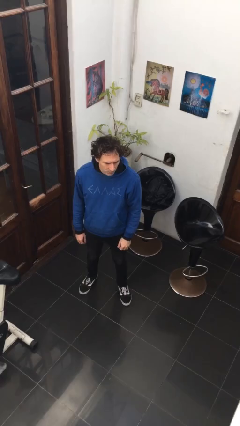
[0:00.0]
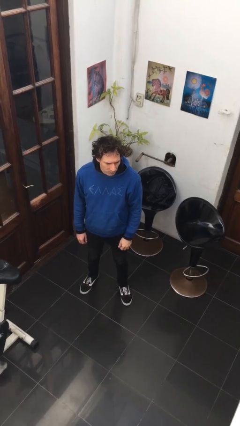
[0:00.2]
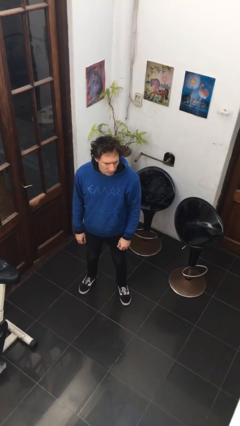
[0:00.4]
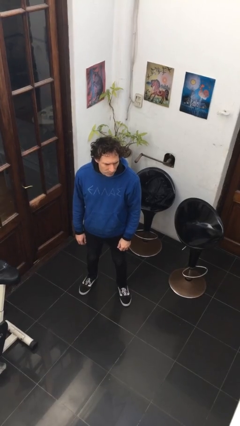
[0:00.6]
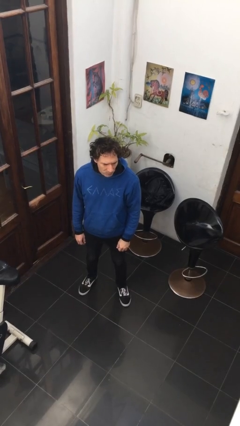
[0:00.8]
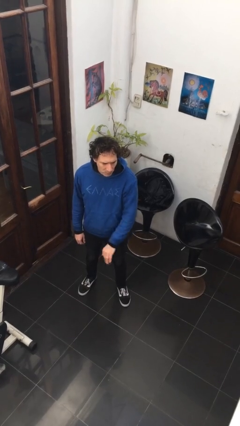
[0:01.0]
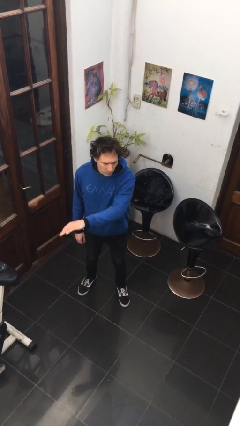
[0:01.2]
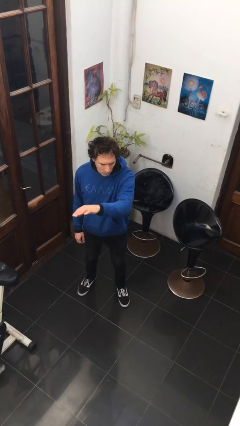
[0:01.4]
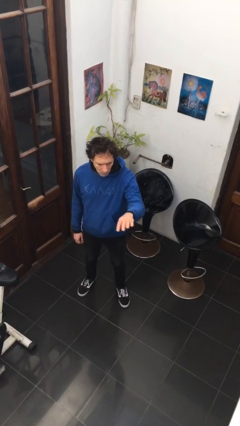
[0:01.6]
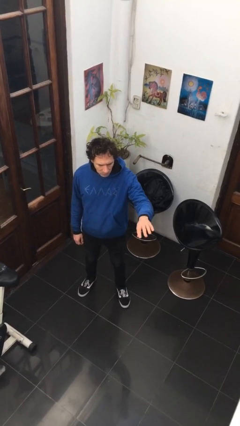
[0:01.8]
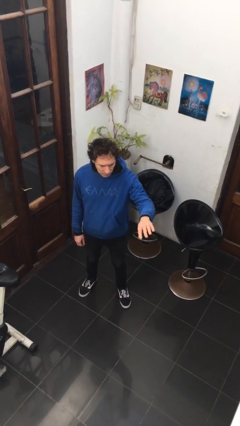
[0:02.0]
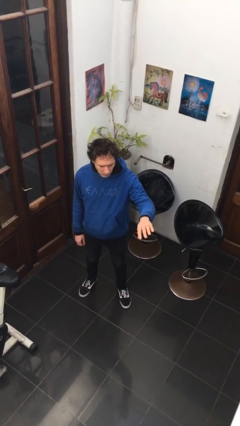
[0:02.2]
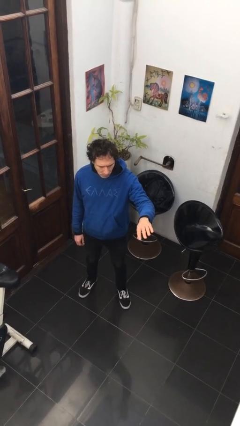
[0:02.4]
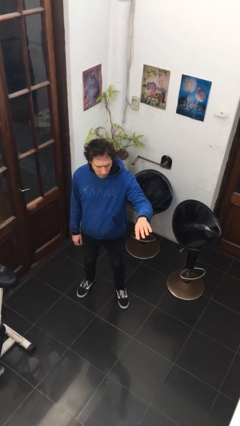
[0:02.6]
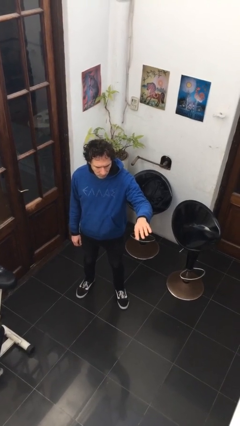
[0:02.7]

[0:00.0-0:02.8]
person gestures swipe left

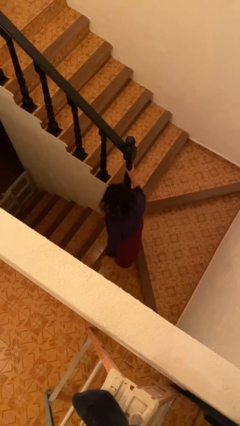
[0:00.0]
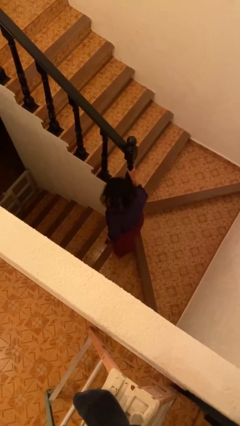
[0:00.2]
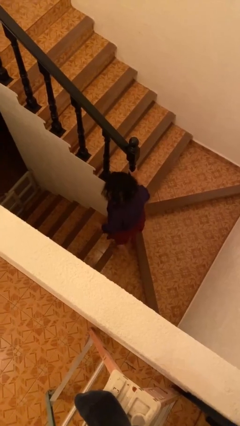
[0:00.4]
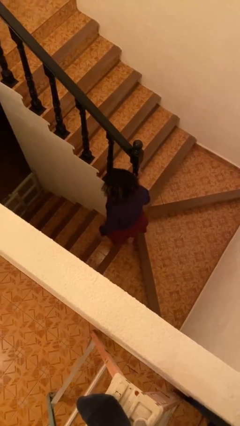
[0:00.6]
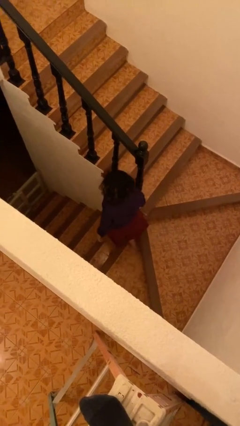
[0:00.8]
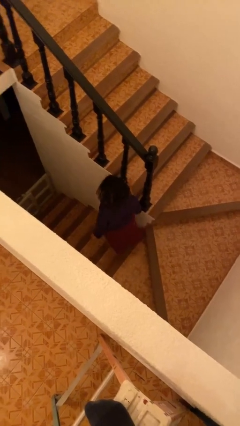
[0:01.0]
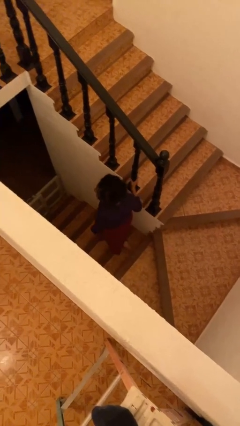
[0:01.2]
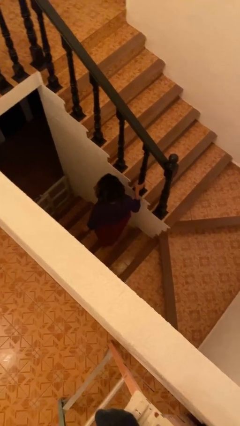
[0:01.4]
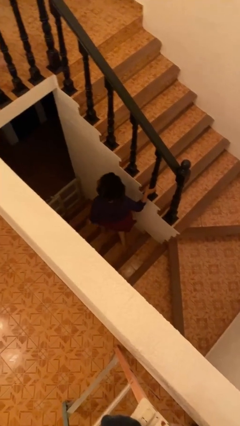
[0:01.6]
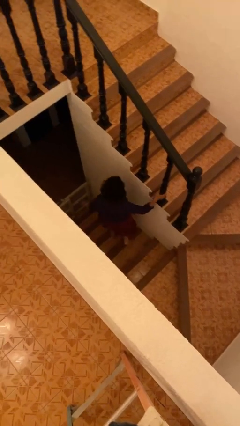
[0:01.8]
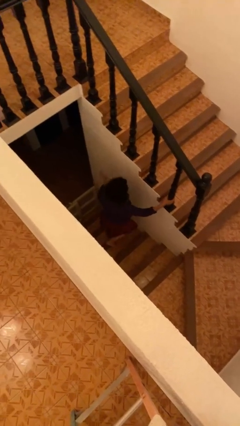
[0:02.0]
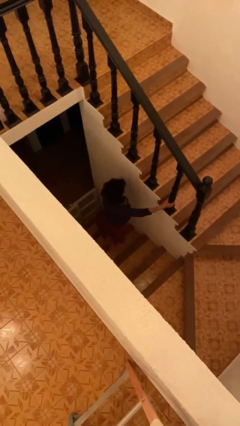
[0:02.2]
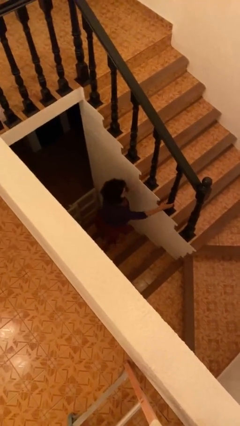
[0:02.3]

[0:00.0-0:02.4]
person climbs down stairs

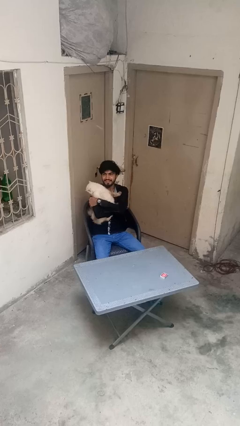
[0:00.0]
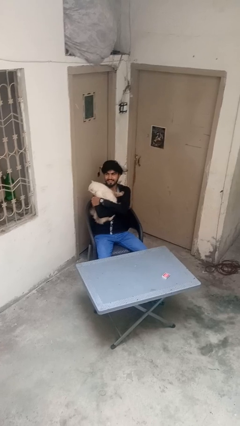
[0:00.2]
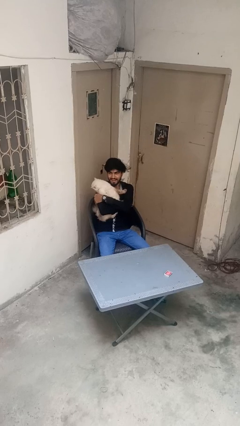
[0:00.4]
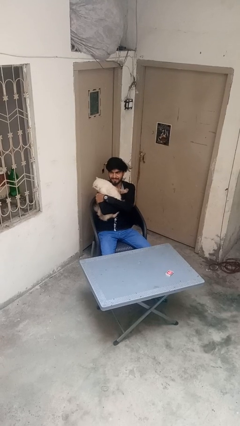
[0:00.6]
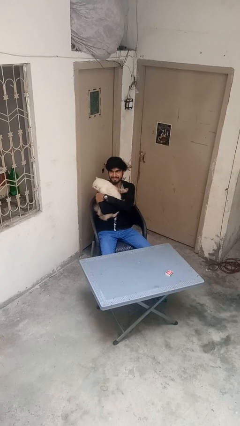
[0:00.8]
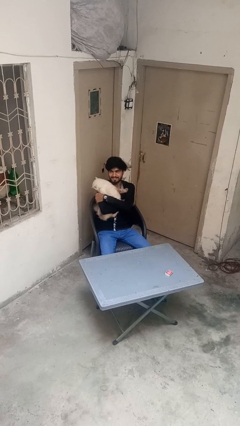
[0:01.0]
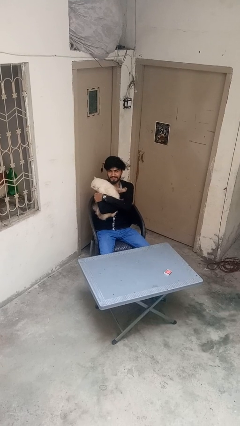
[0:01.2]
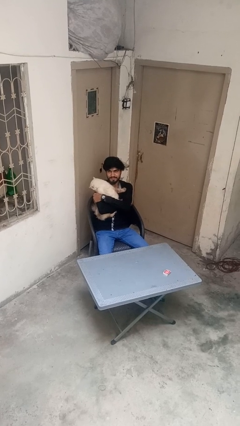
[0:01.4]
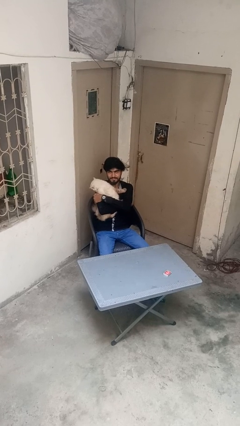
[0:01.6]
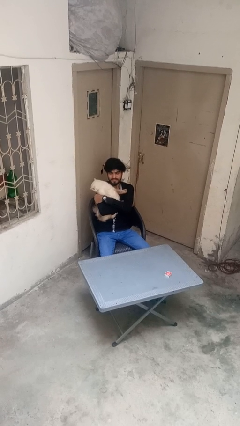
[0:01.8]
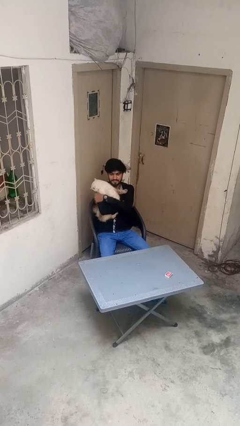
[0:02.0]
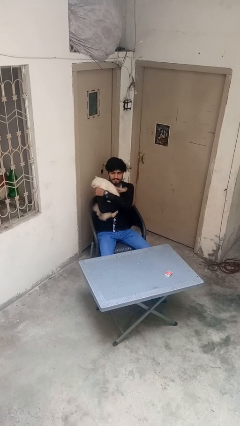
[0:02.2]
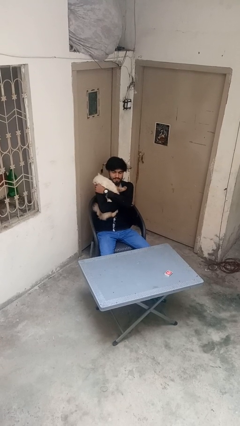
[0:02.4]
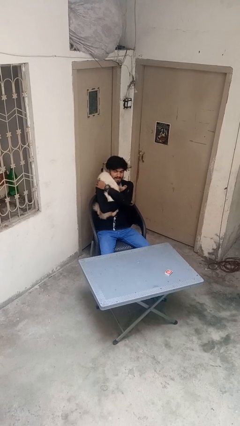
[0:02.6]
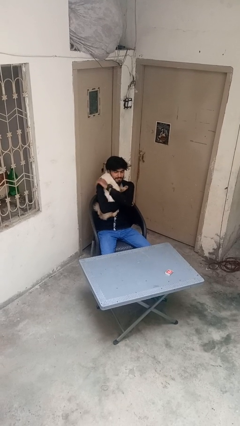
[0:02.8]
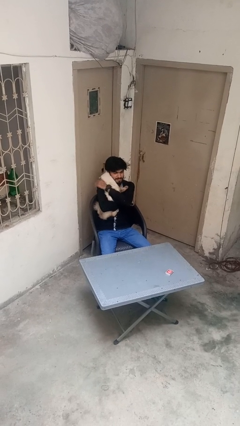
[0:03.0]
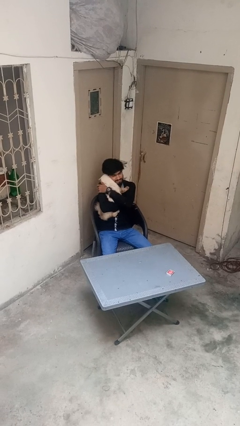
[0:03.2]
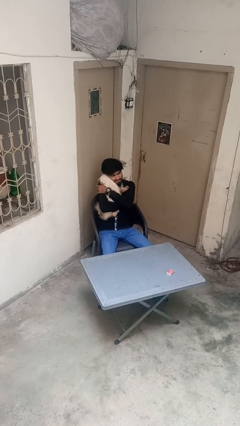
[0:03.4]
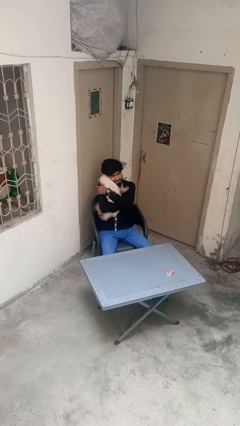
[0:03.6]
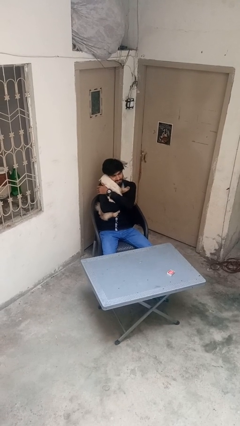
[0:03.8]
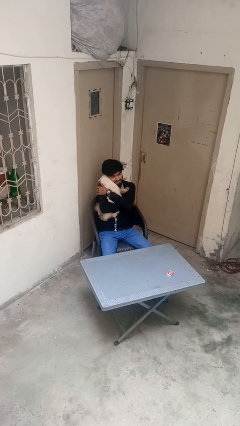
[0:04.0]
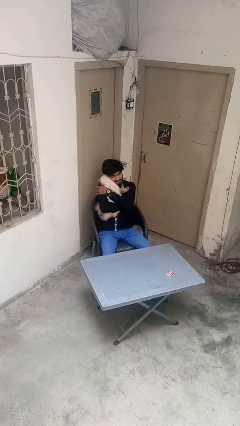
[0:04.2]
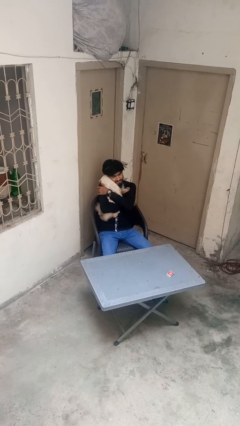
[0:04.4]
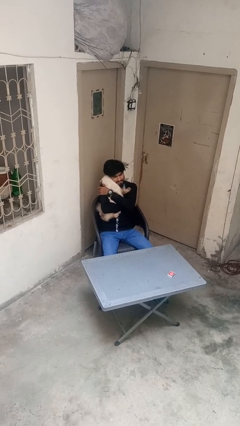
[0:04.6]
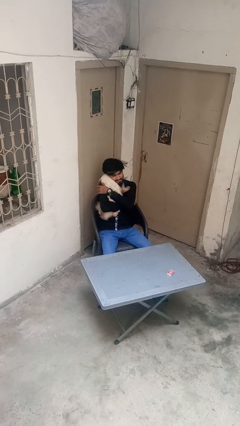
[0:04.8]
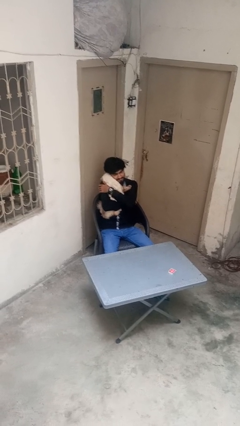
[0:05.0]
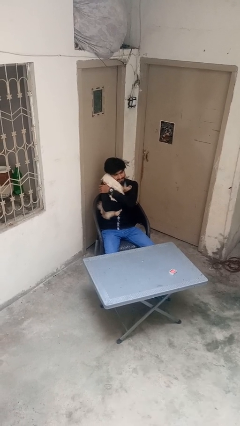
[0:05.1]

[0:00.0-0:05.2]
person hugs cat

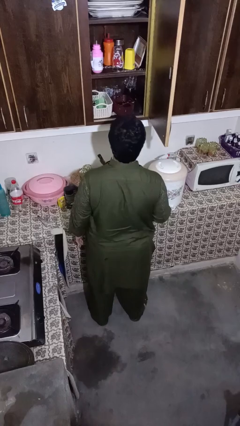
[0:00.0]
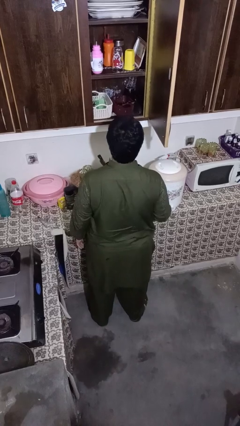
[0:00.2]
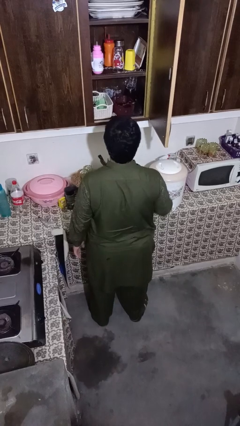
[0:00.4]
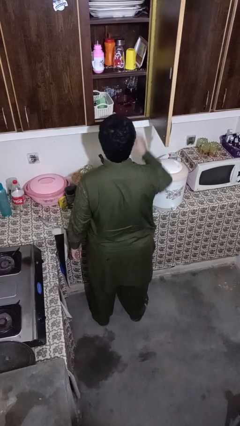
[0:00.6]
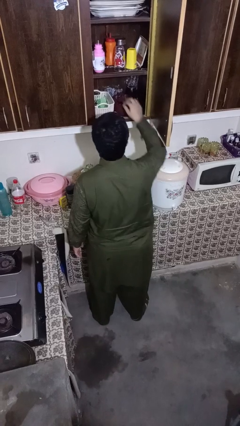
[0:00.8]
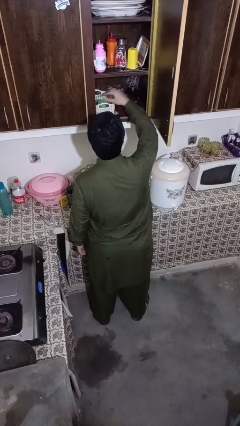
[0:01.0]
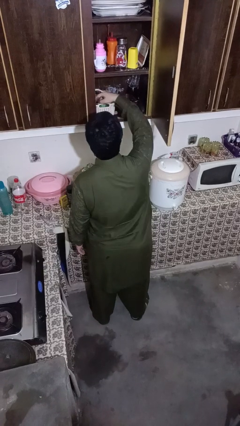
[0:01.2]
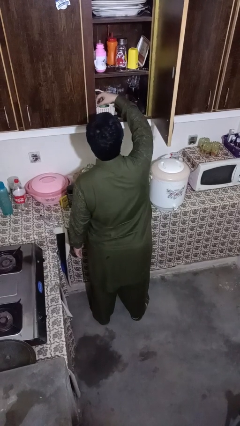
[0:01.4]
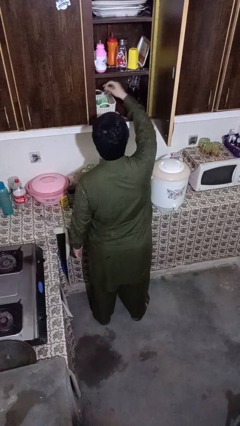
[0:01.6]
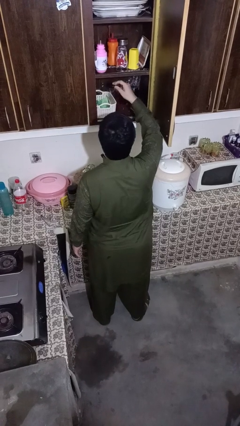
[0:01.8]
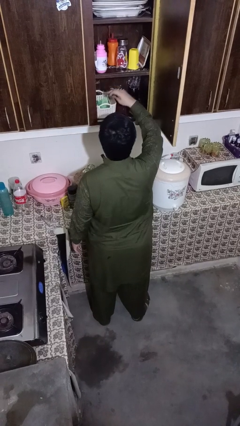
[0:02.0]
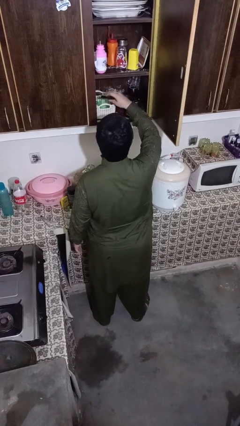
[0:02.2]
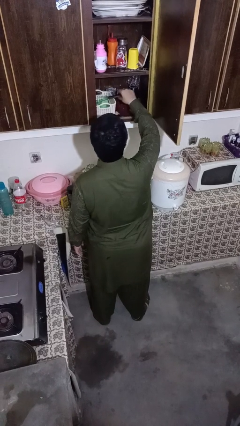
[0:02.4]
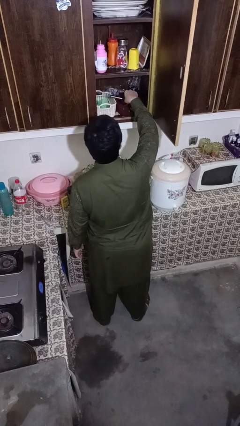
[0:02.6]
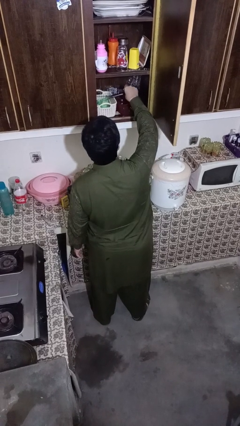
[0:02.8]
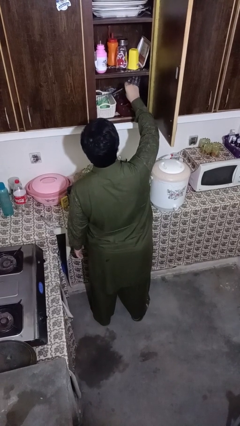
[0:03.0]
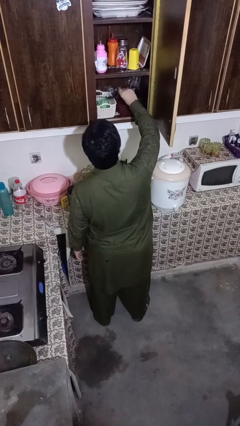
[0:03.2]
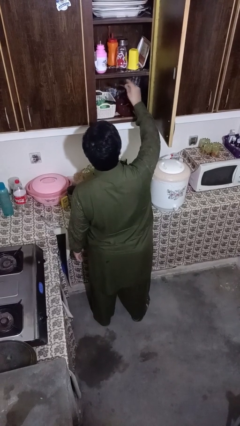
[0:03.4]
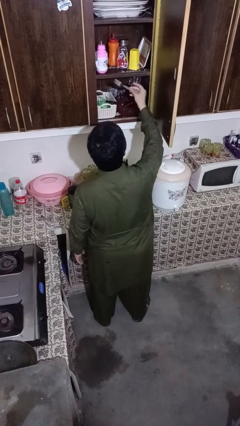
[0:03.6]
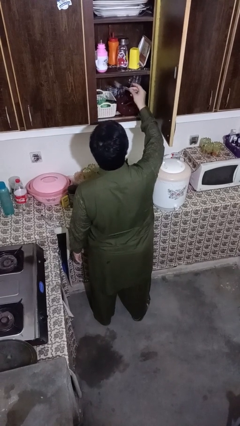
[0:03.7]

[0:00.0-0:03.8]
person searches in kitchen drawer

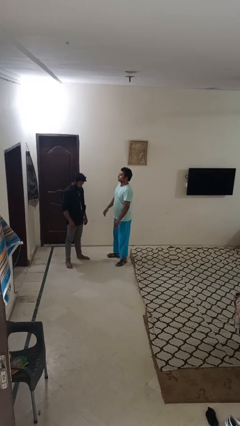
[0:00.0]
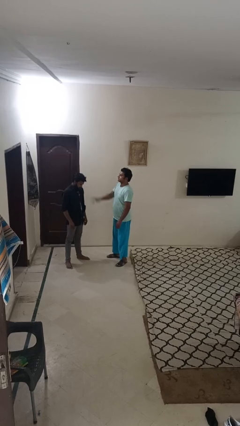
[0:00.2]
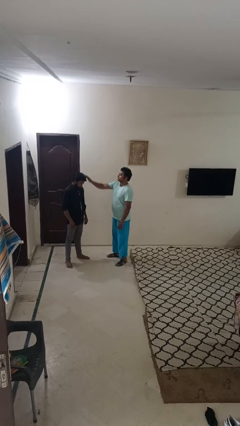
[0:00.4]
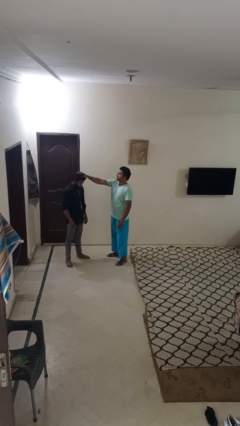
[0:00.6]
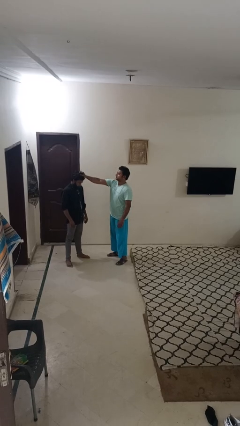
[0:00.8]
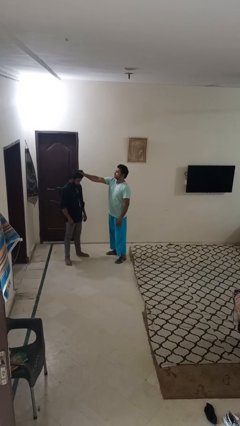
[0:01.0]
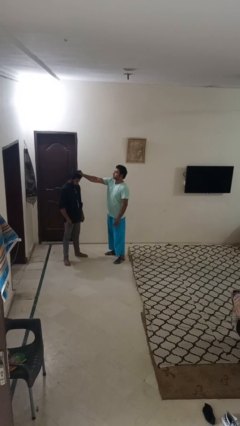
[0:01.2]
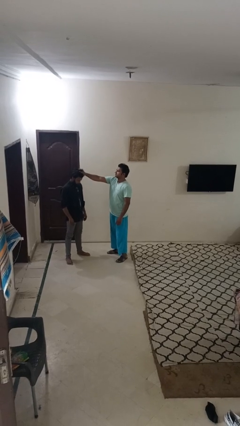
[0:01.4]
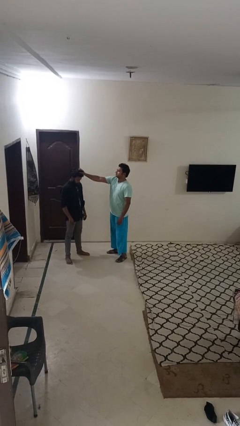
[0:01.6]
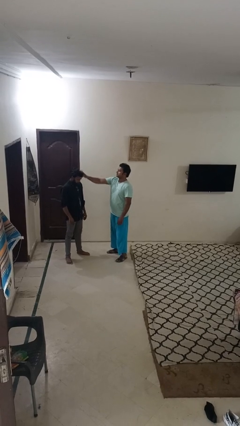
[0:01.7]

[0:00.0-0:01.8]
person grabs person by hair

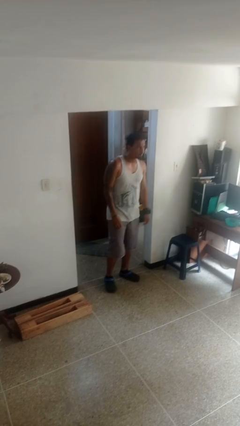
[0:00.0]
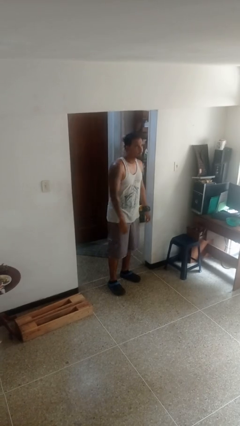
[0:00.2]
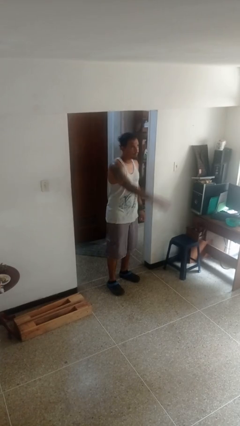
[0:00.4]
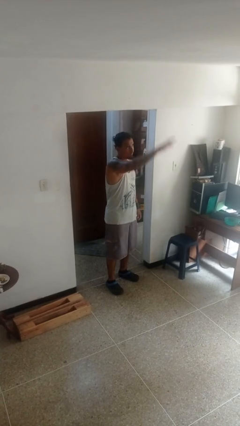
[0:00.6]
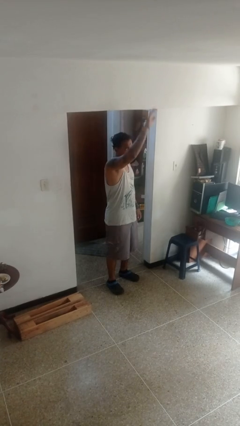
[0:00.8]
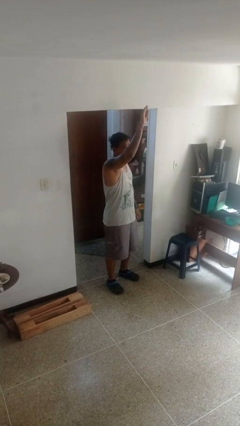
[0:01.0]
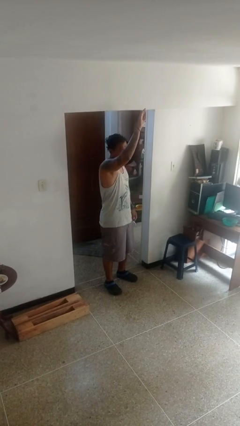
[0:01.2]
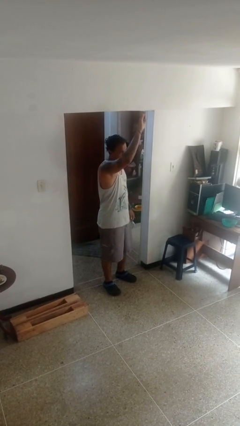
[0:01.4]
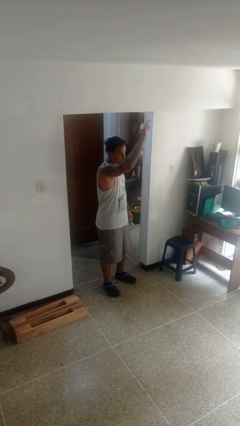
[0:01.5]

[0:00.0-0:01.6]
person gestures swipe up
